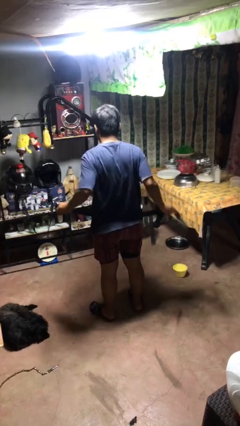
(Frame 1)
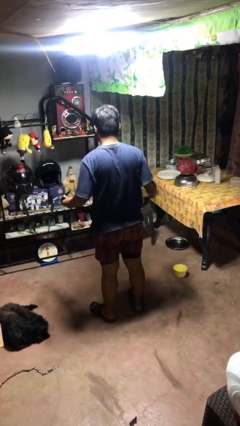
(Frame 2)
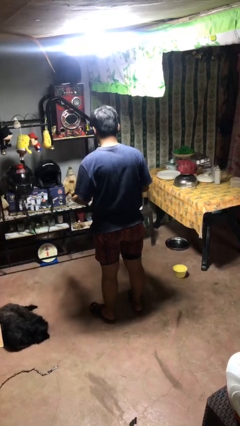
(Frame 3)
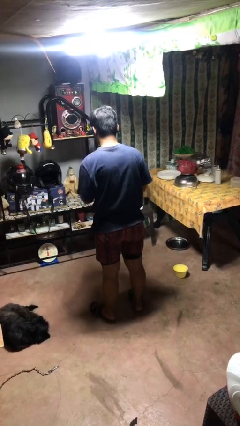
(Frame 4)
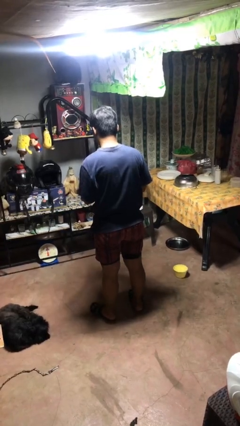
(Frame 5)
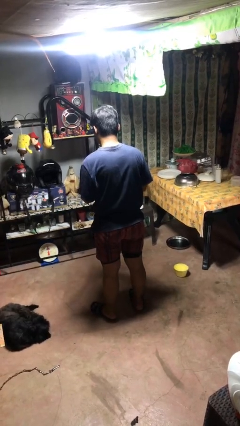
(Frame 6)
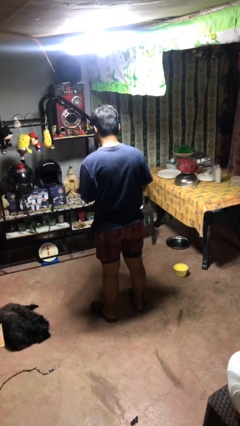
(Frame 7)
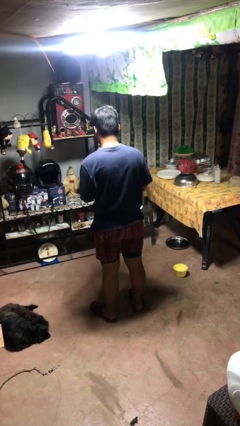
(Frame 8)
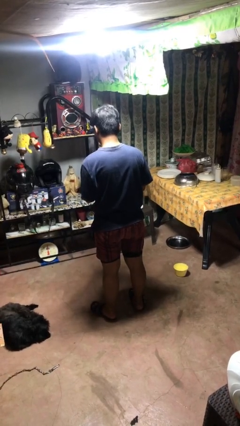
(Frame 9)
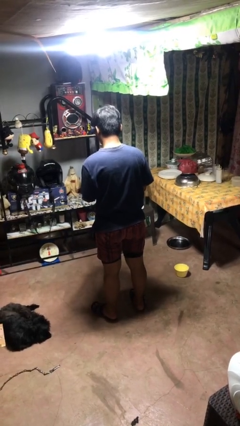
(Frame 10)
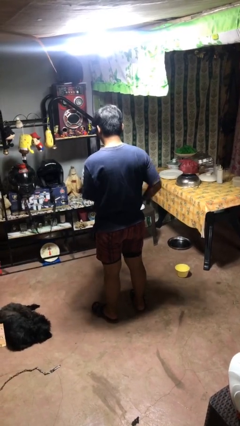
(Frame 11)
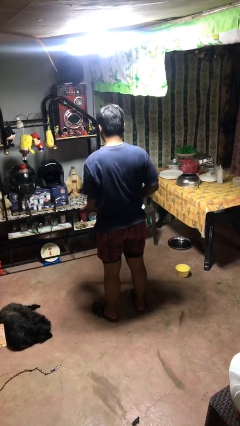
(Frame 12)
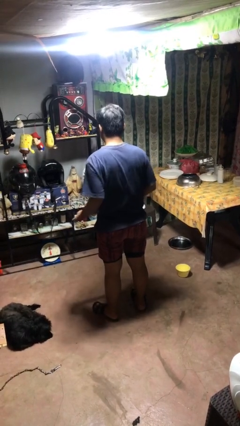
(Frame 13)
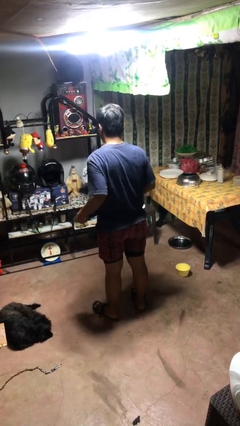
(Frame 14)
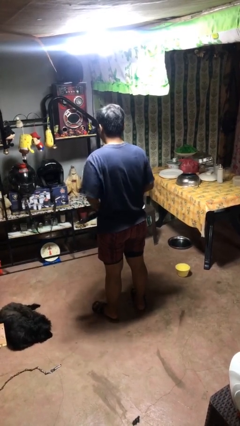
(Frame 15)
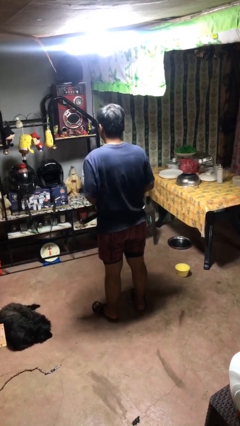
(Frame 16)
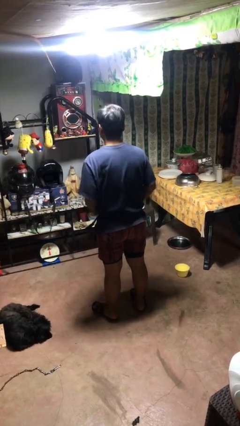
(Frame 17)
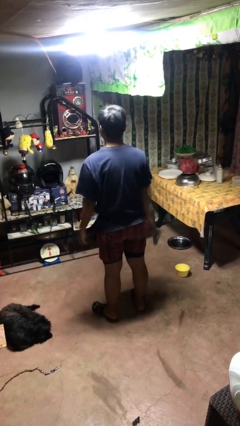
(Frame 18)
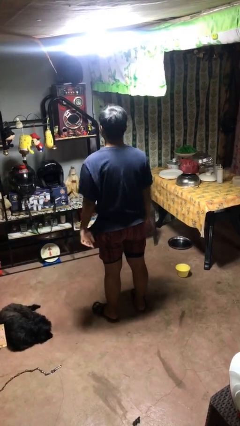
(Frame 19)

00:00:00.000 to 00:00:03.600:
person puts on belt

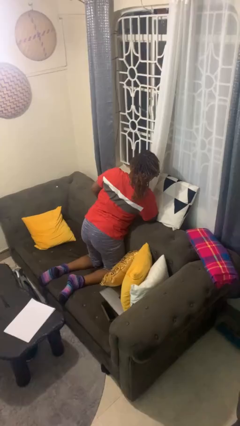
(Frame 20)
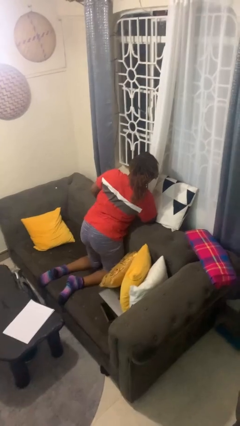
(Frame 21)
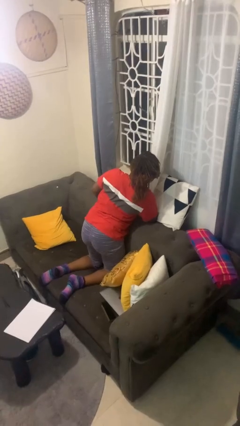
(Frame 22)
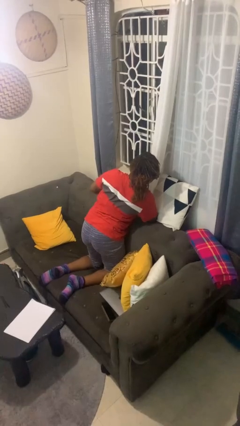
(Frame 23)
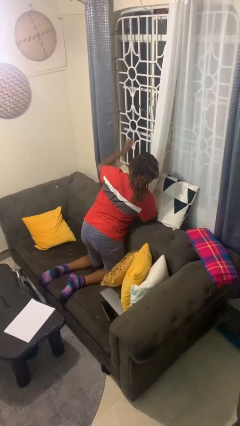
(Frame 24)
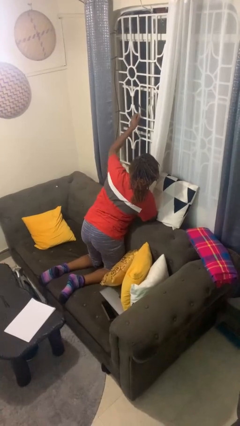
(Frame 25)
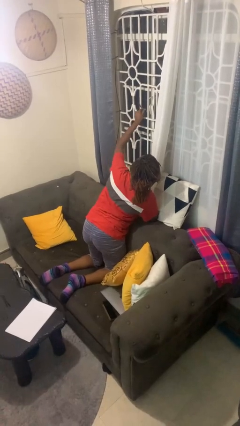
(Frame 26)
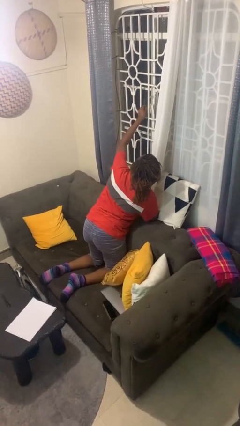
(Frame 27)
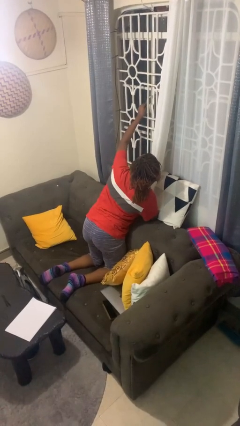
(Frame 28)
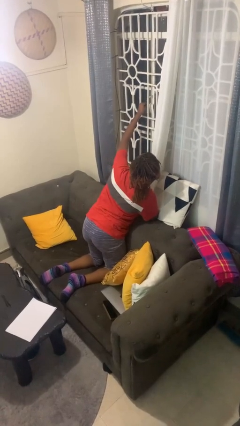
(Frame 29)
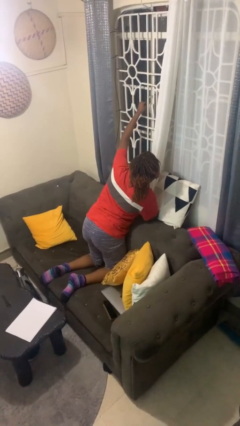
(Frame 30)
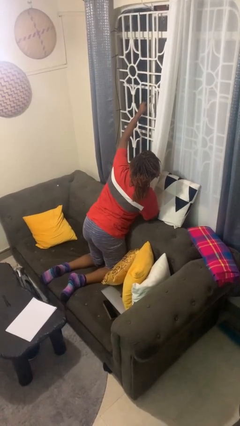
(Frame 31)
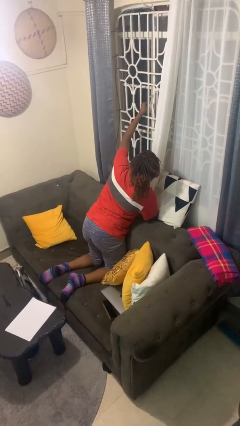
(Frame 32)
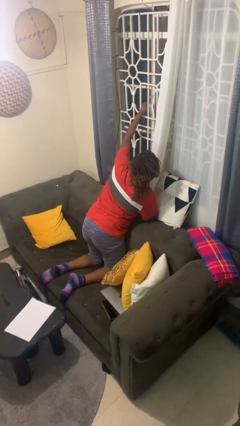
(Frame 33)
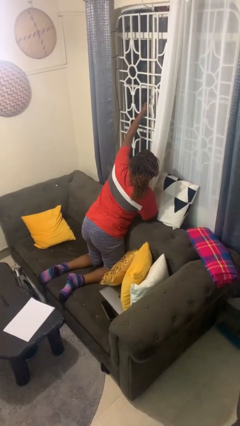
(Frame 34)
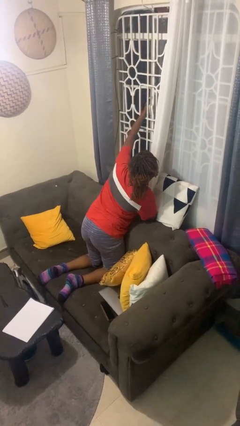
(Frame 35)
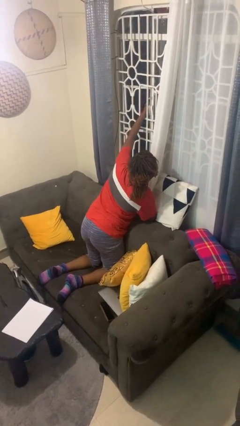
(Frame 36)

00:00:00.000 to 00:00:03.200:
person opens home window

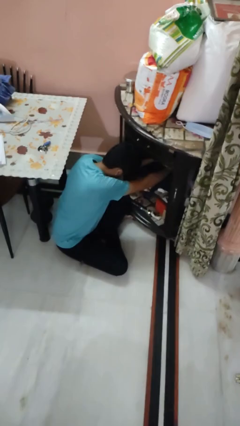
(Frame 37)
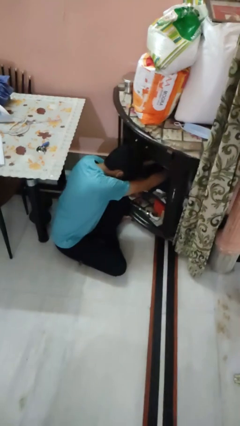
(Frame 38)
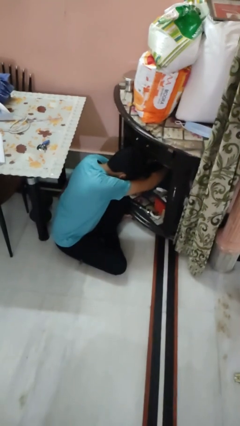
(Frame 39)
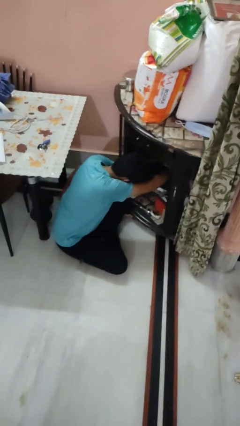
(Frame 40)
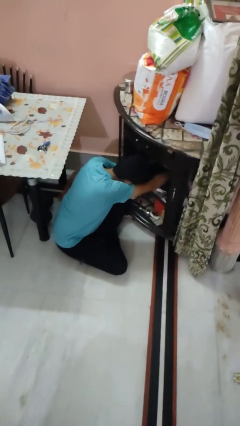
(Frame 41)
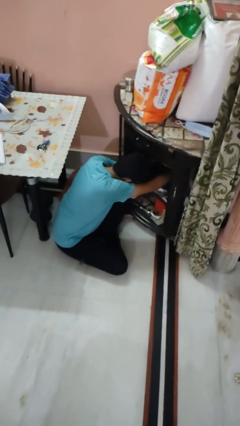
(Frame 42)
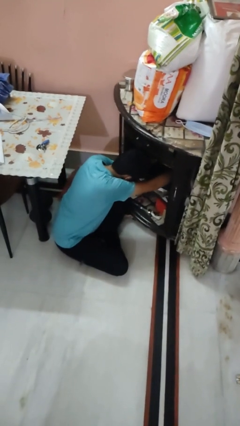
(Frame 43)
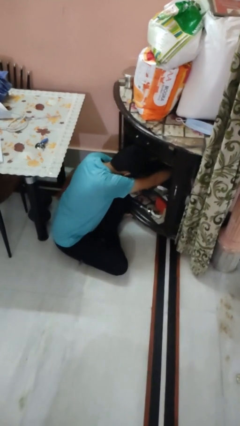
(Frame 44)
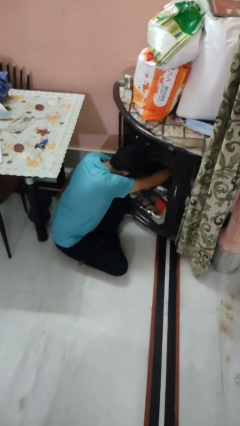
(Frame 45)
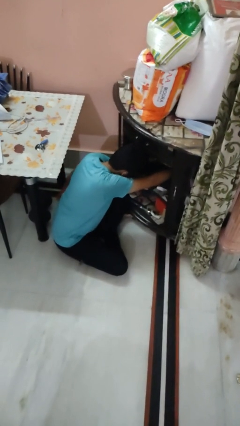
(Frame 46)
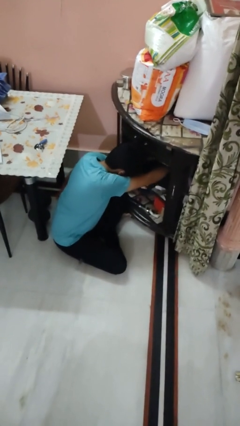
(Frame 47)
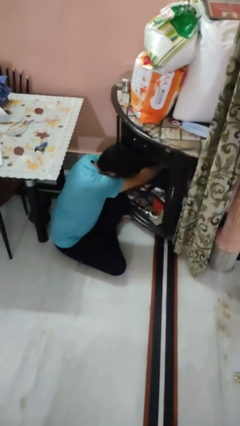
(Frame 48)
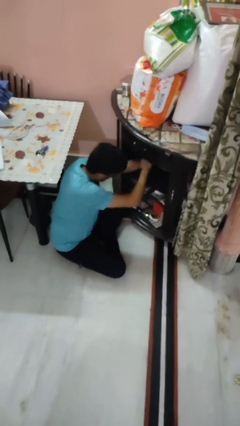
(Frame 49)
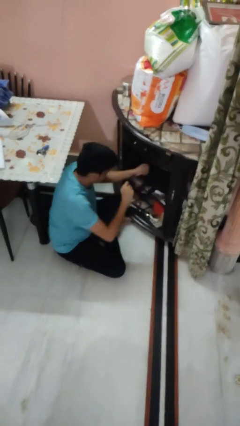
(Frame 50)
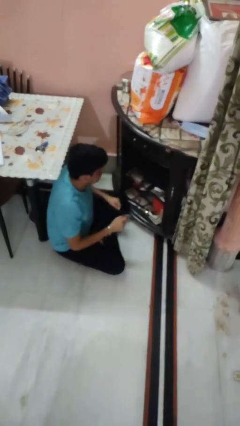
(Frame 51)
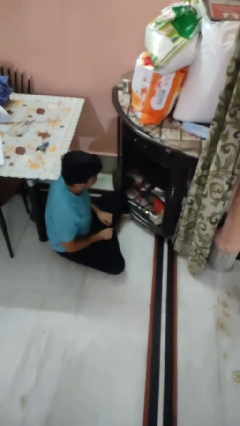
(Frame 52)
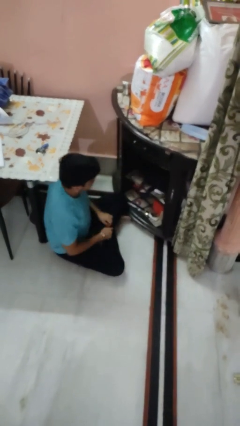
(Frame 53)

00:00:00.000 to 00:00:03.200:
person searches in cabinet

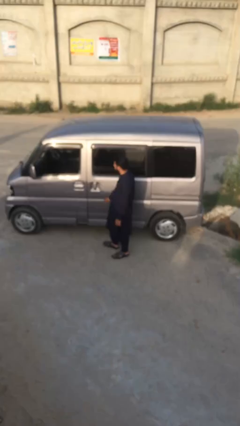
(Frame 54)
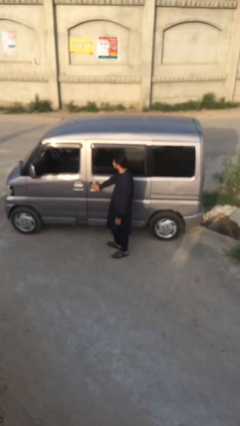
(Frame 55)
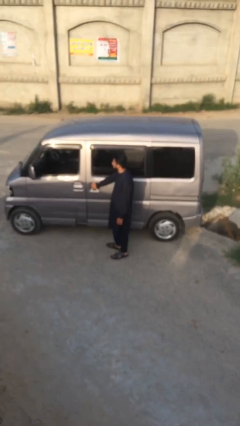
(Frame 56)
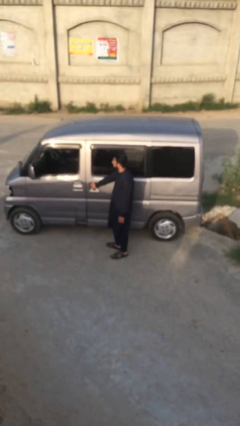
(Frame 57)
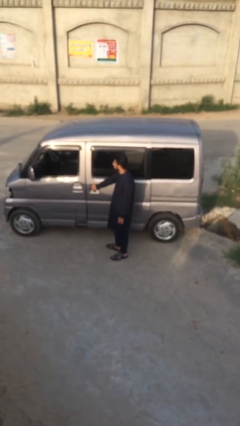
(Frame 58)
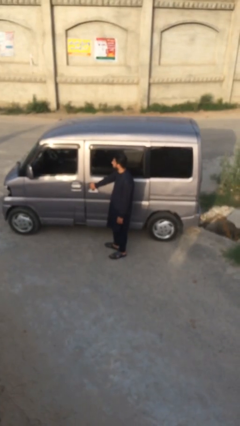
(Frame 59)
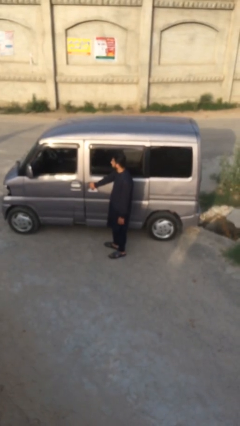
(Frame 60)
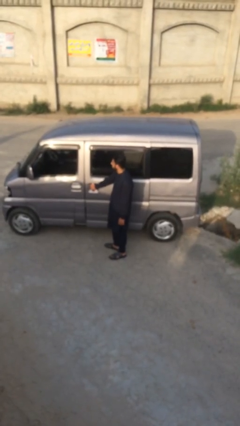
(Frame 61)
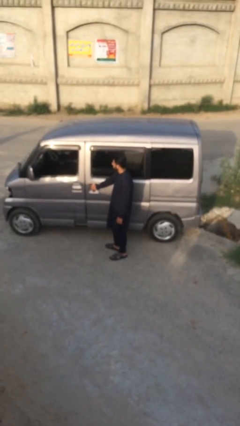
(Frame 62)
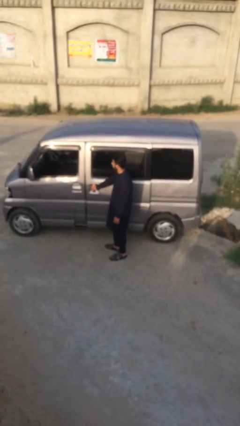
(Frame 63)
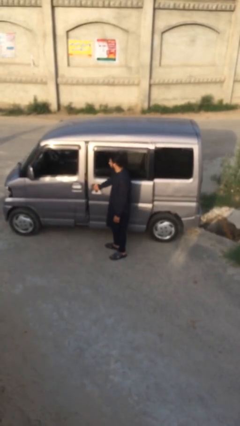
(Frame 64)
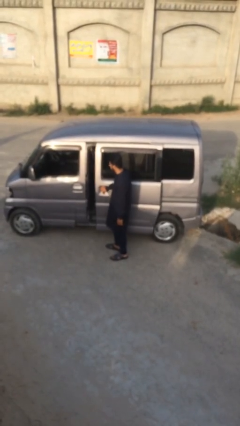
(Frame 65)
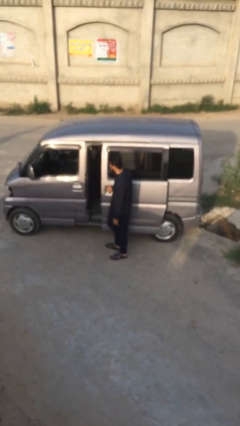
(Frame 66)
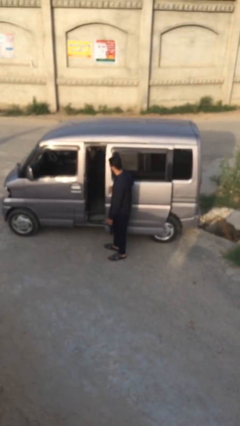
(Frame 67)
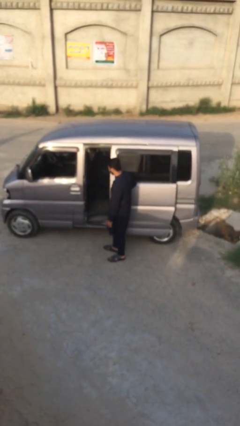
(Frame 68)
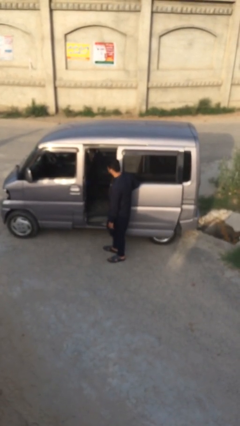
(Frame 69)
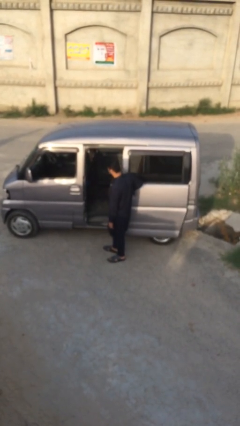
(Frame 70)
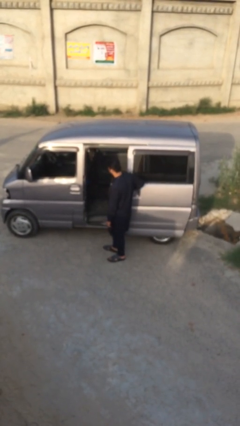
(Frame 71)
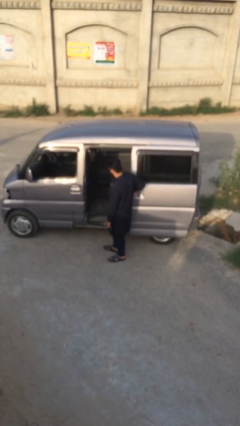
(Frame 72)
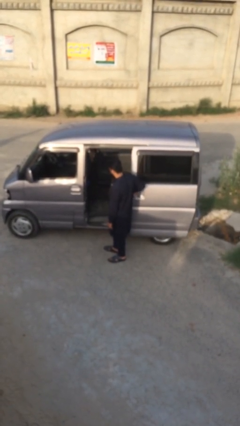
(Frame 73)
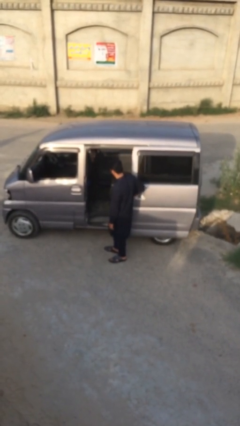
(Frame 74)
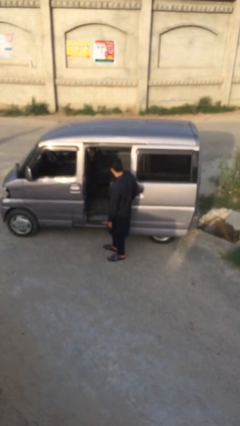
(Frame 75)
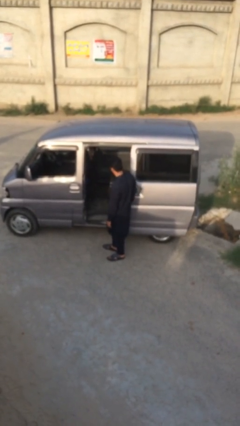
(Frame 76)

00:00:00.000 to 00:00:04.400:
person opens car door

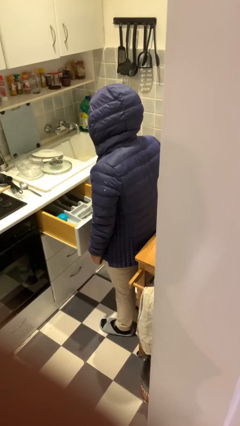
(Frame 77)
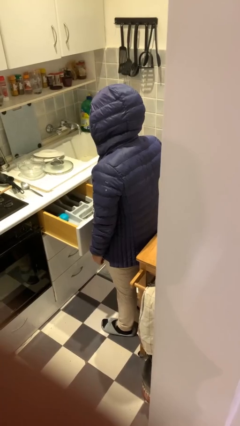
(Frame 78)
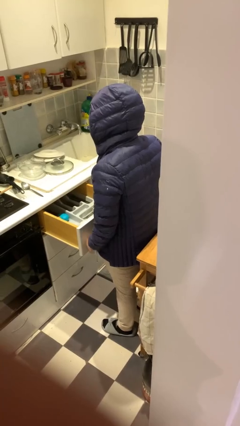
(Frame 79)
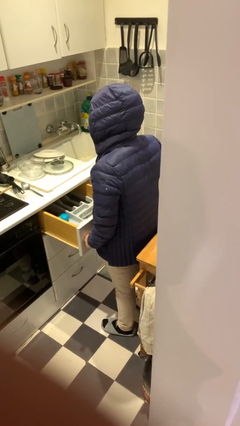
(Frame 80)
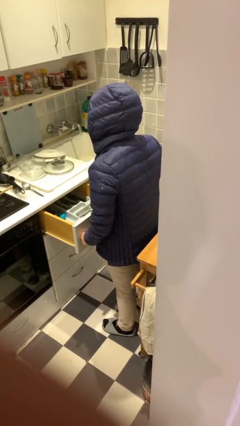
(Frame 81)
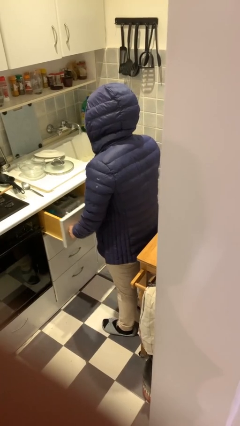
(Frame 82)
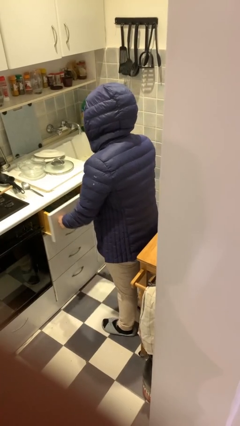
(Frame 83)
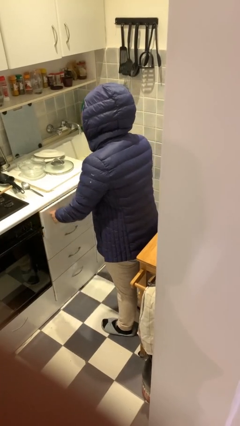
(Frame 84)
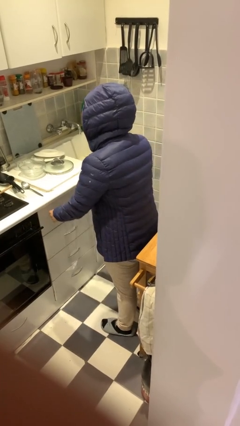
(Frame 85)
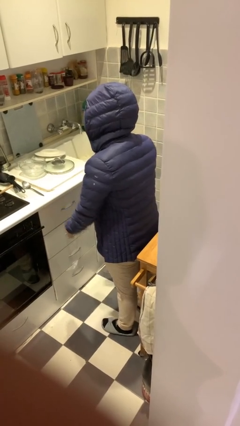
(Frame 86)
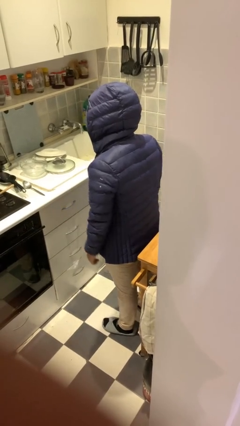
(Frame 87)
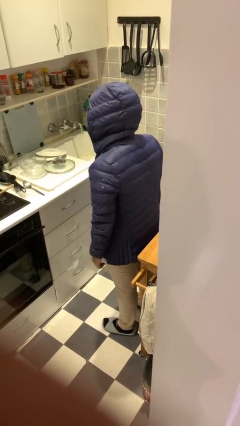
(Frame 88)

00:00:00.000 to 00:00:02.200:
person closes kitchen drawer

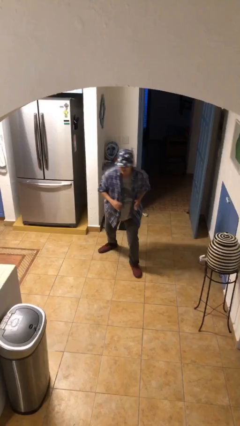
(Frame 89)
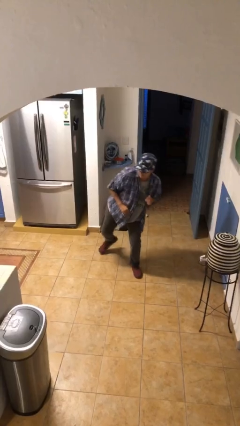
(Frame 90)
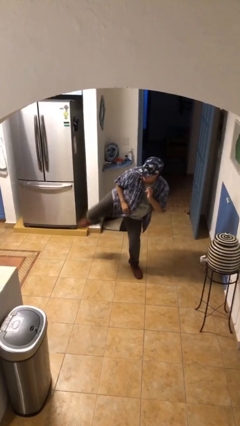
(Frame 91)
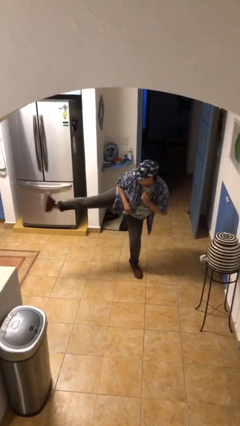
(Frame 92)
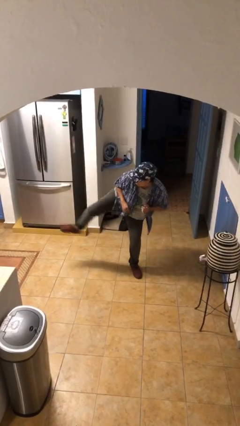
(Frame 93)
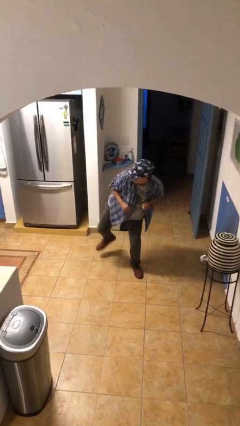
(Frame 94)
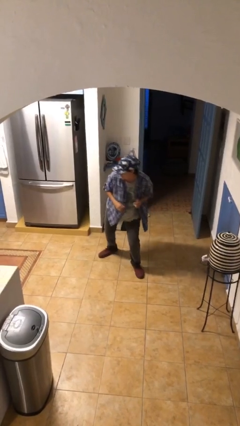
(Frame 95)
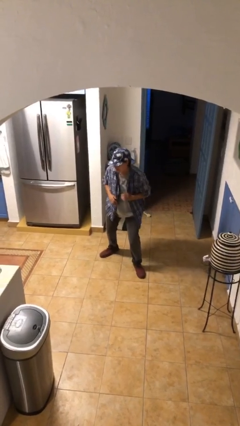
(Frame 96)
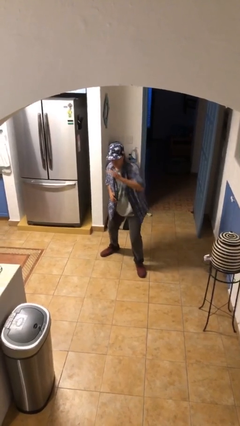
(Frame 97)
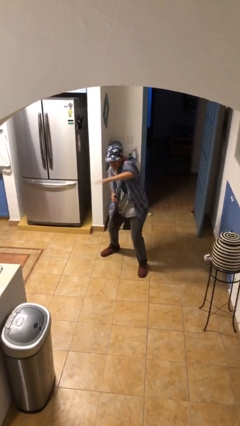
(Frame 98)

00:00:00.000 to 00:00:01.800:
person karate kicks
